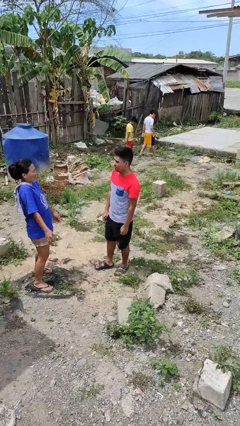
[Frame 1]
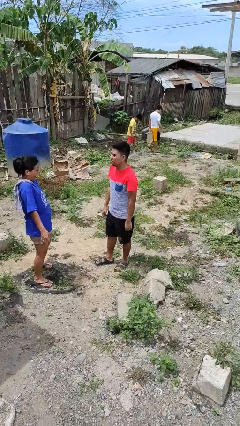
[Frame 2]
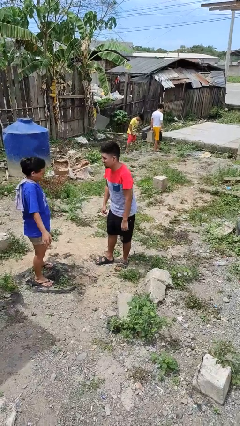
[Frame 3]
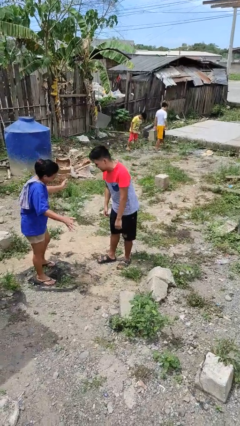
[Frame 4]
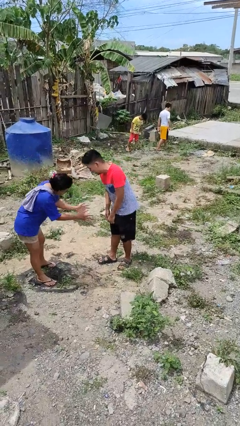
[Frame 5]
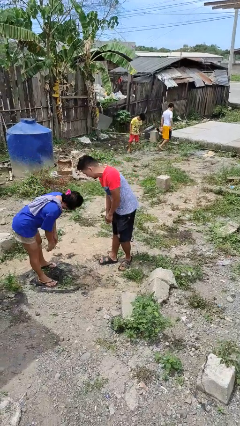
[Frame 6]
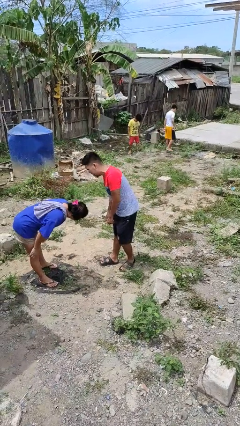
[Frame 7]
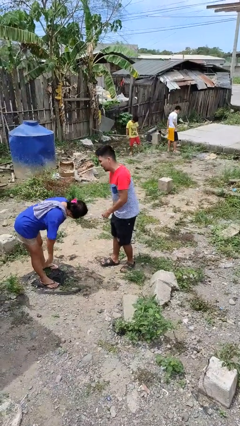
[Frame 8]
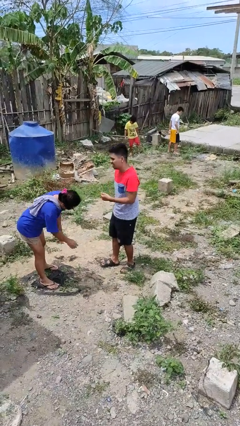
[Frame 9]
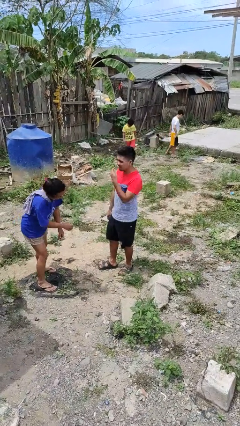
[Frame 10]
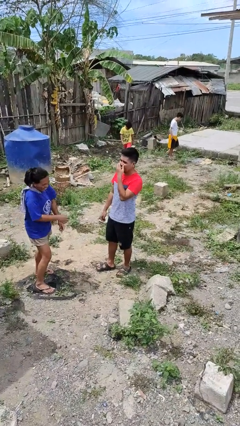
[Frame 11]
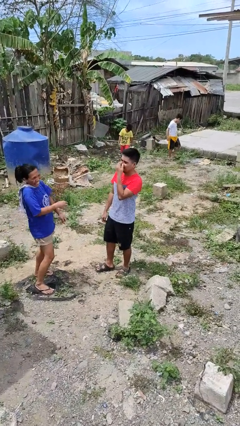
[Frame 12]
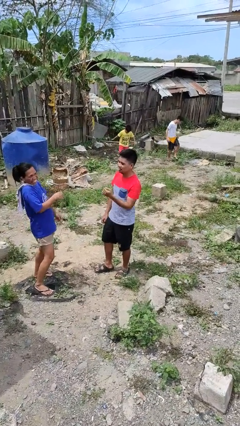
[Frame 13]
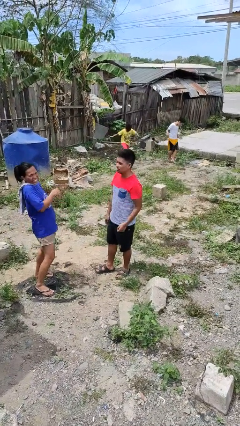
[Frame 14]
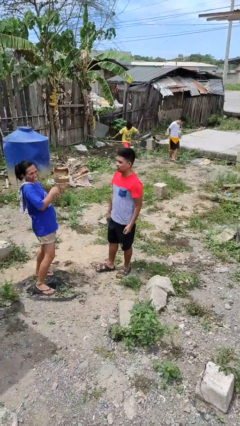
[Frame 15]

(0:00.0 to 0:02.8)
person laughs with person

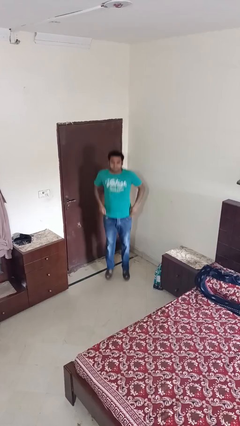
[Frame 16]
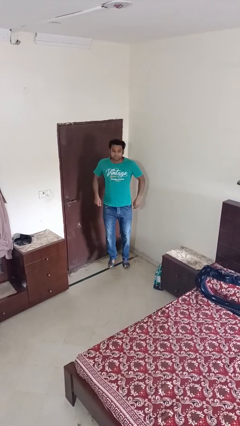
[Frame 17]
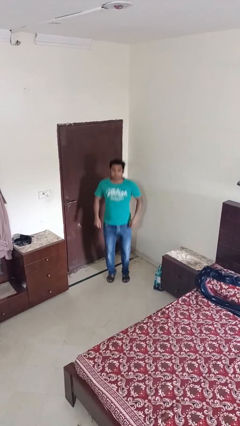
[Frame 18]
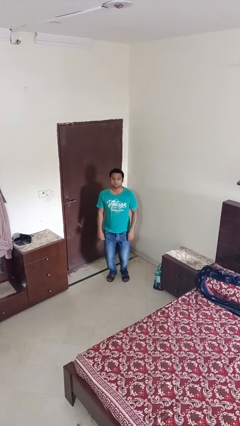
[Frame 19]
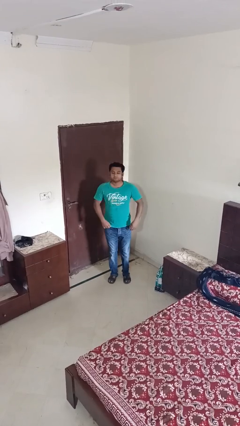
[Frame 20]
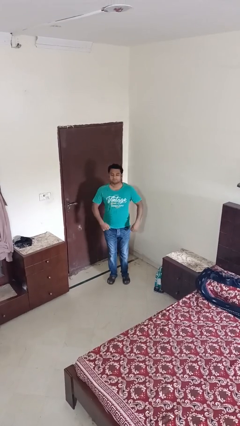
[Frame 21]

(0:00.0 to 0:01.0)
person jumps

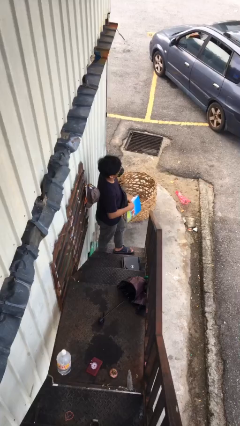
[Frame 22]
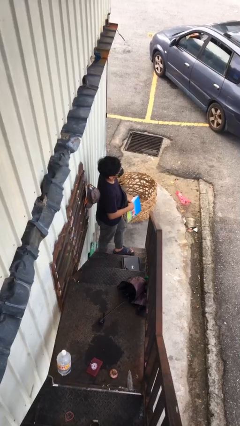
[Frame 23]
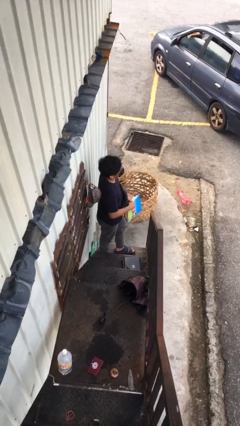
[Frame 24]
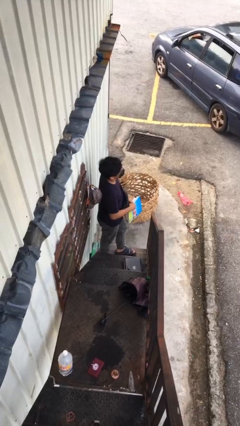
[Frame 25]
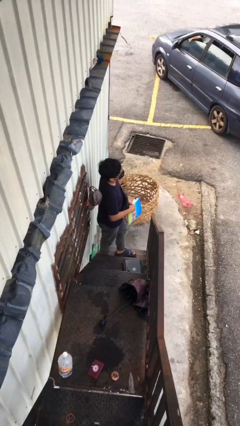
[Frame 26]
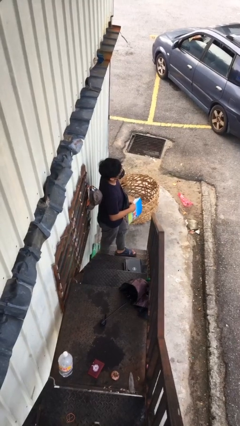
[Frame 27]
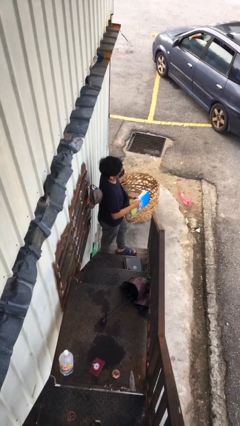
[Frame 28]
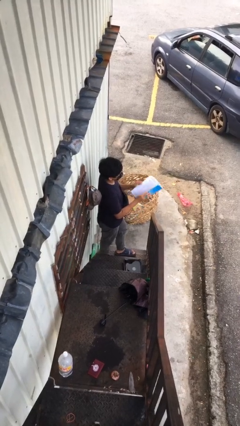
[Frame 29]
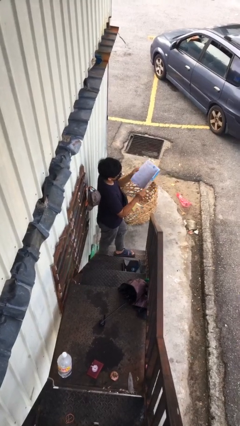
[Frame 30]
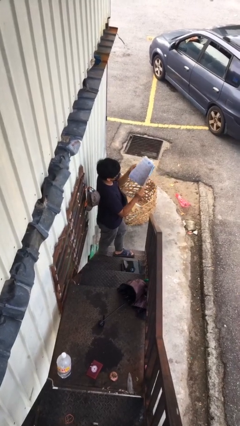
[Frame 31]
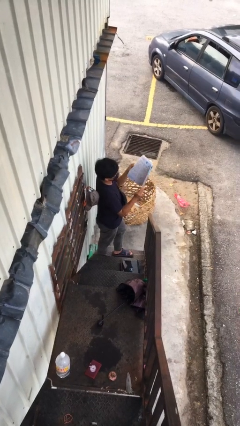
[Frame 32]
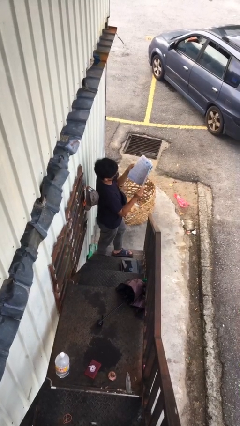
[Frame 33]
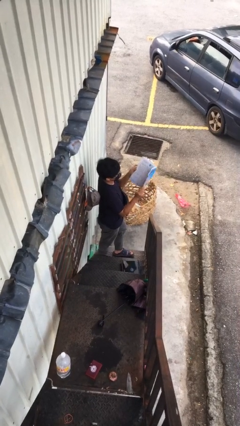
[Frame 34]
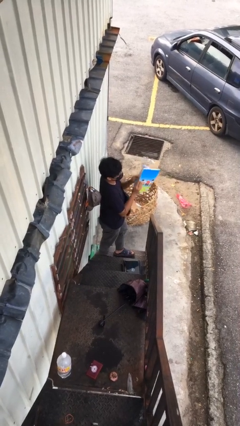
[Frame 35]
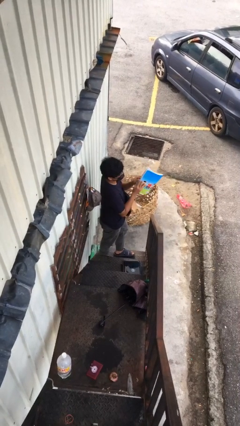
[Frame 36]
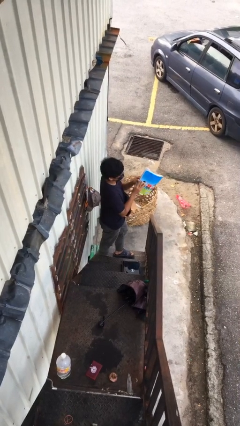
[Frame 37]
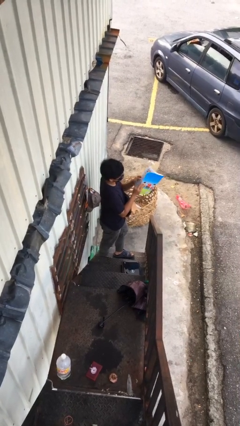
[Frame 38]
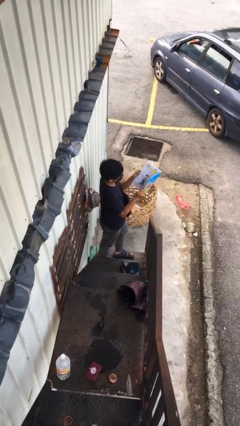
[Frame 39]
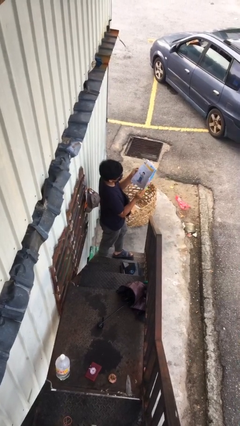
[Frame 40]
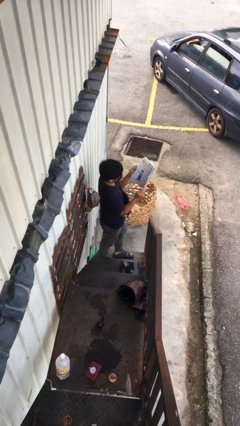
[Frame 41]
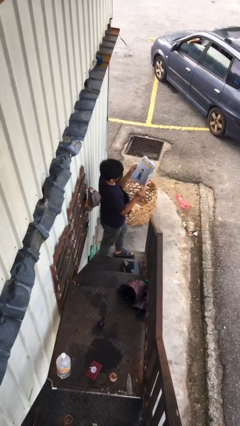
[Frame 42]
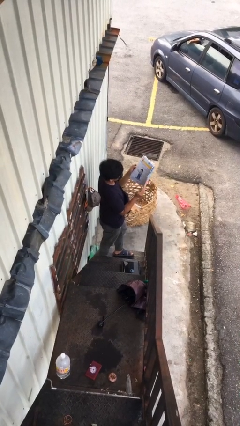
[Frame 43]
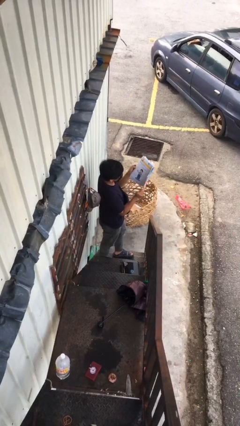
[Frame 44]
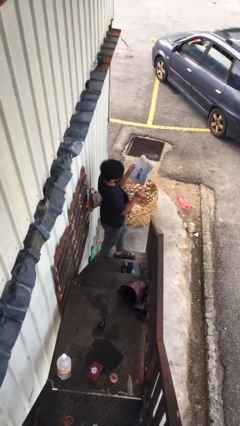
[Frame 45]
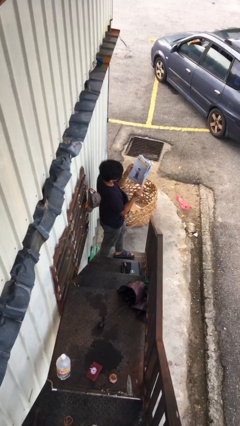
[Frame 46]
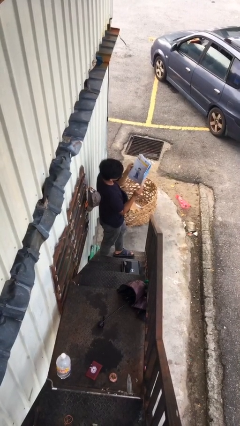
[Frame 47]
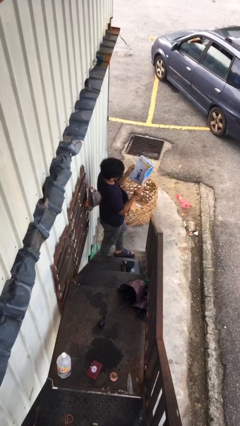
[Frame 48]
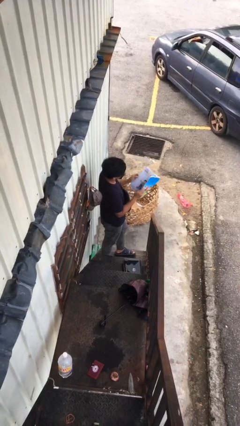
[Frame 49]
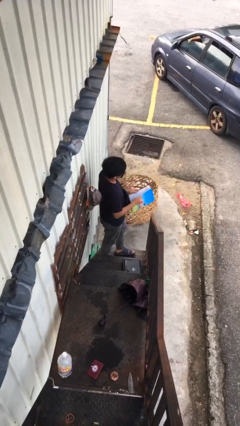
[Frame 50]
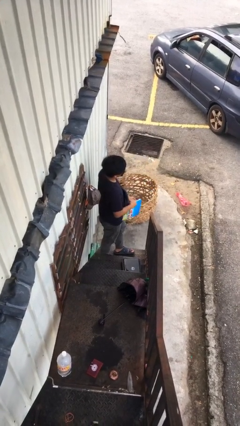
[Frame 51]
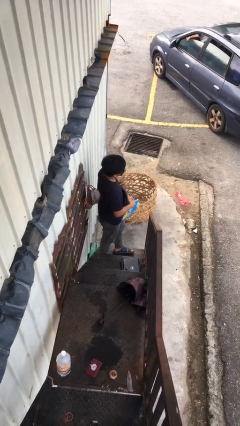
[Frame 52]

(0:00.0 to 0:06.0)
person reads document

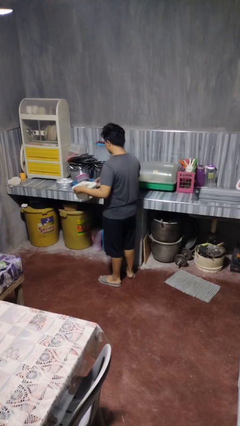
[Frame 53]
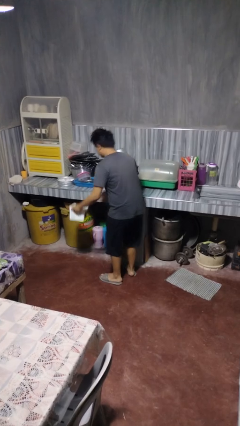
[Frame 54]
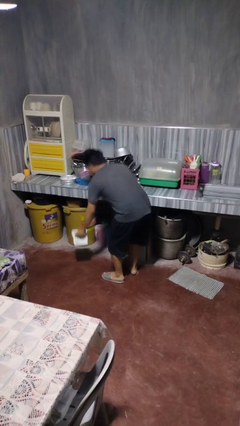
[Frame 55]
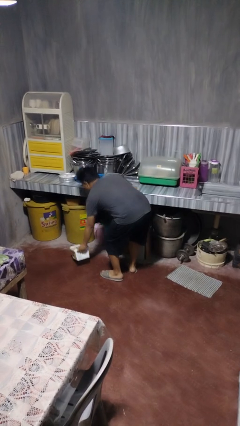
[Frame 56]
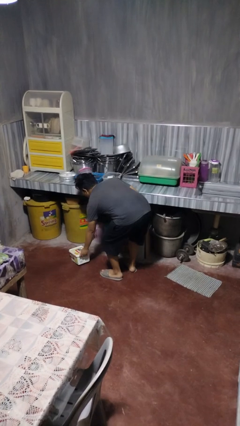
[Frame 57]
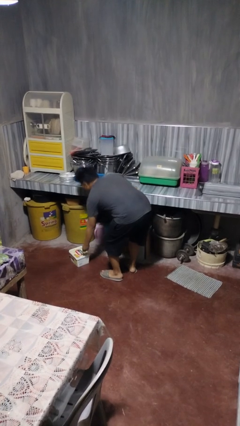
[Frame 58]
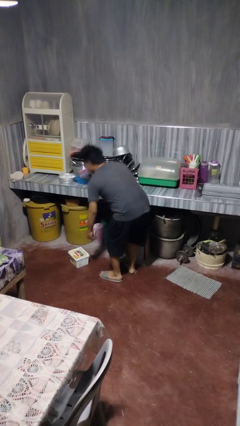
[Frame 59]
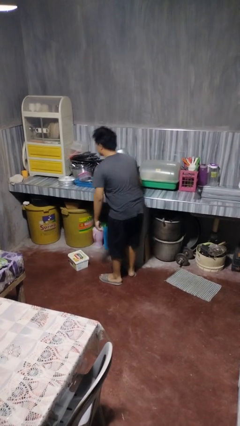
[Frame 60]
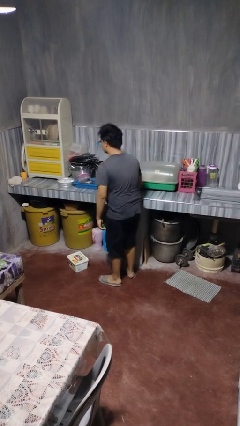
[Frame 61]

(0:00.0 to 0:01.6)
person puts down object on countertop

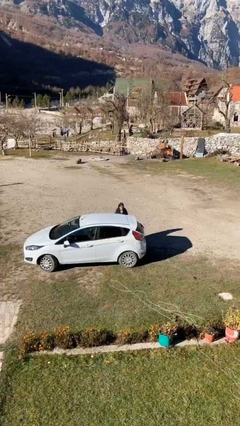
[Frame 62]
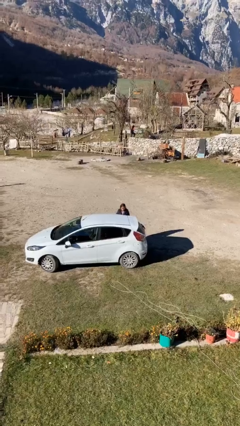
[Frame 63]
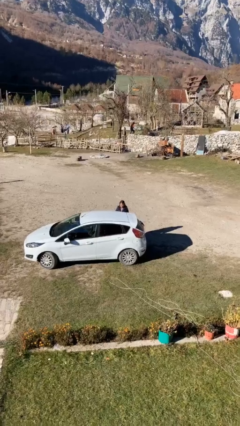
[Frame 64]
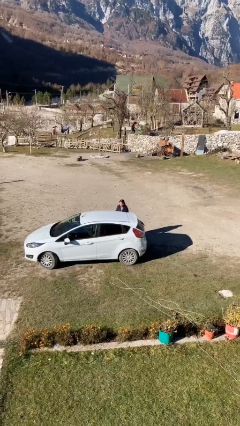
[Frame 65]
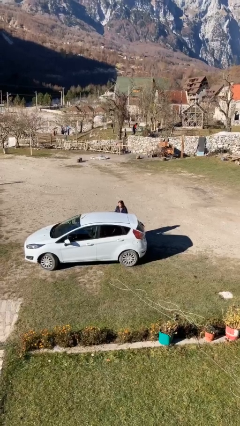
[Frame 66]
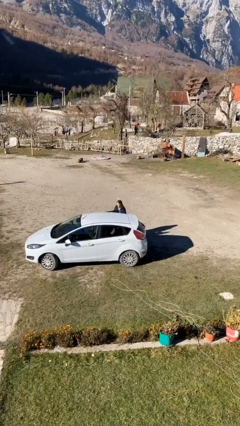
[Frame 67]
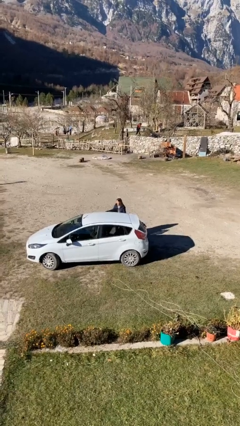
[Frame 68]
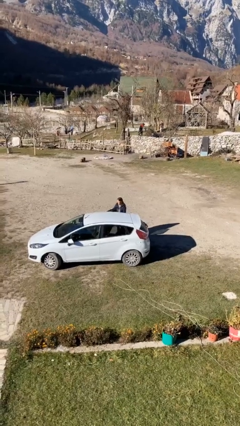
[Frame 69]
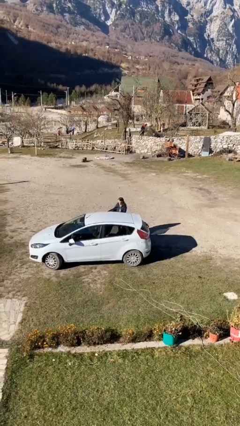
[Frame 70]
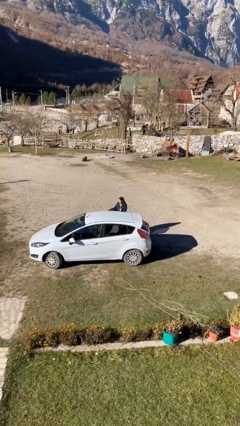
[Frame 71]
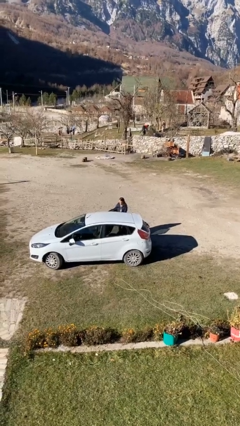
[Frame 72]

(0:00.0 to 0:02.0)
person opens car door

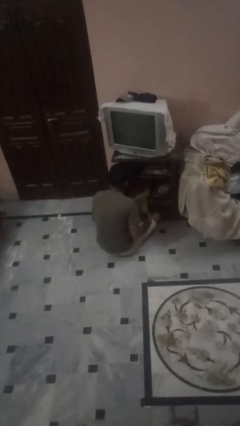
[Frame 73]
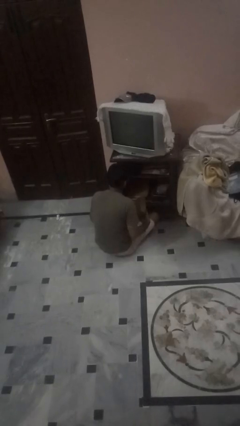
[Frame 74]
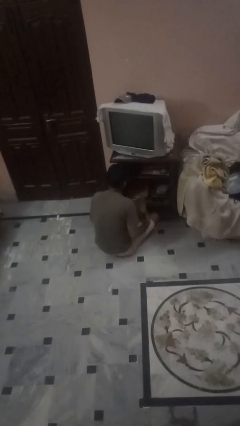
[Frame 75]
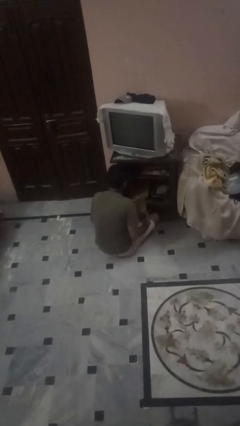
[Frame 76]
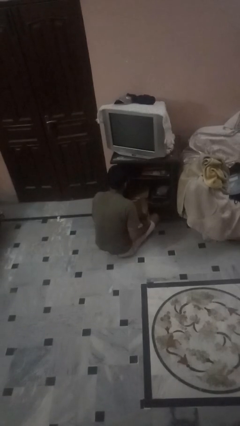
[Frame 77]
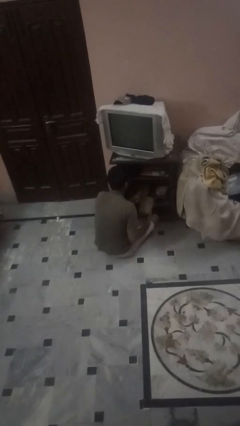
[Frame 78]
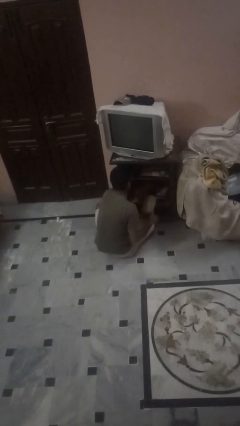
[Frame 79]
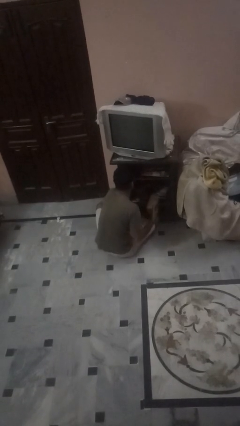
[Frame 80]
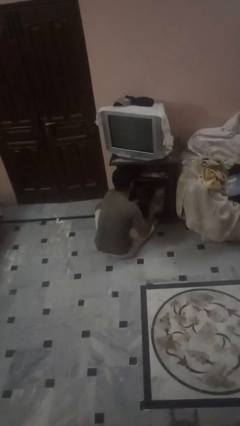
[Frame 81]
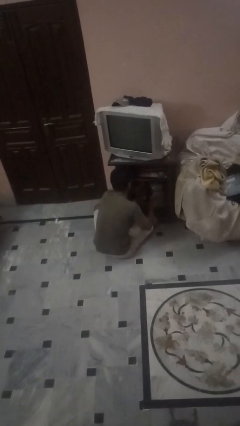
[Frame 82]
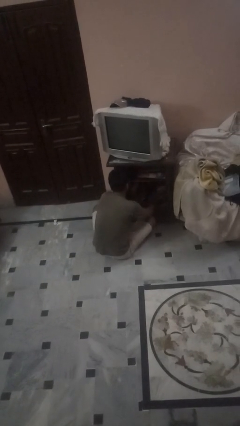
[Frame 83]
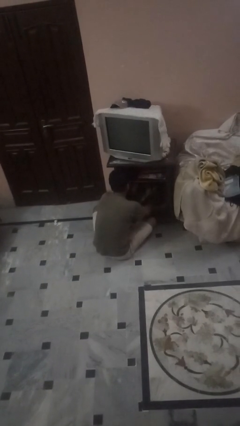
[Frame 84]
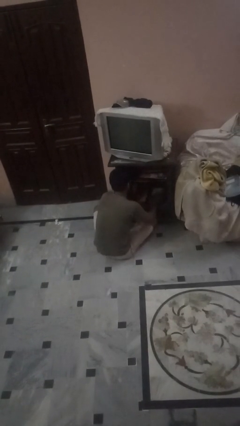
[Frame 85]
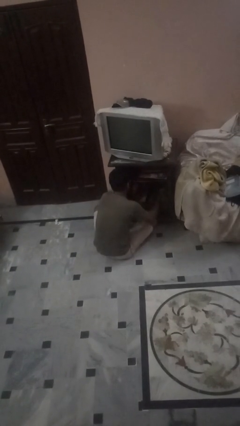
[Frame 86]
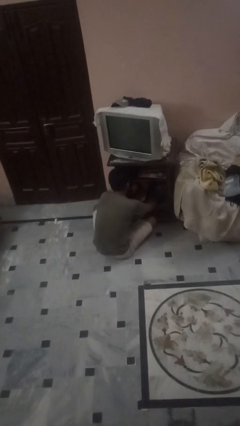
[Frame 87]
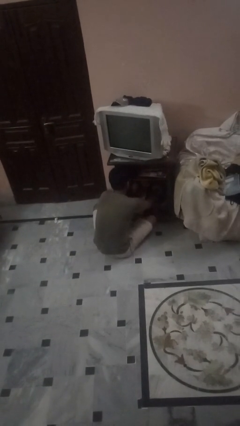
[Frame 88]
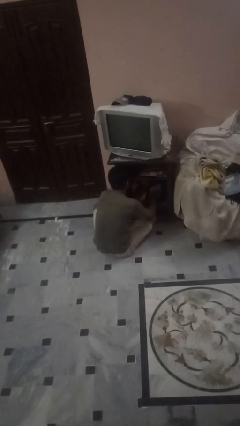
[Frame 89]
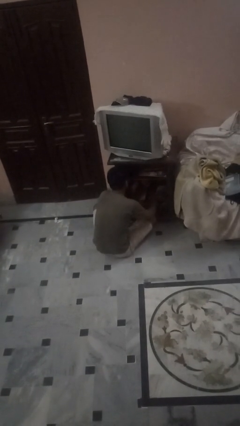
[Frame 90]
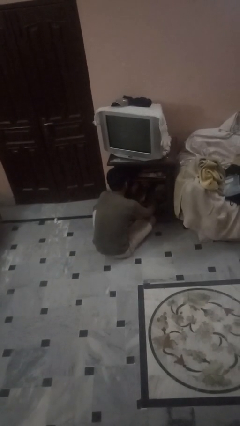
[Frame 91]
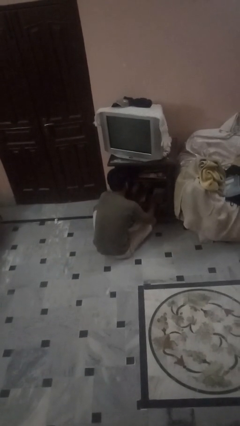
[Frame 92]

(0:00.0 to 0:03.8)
person dusts furniture
